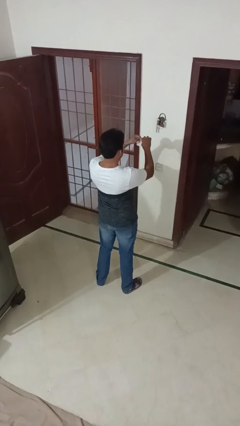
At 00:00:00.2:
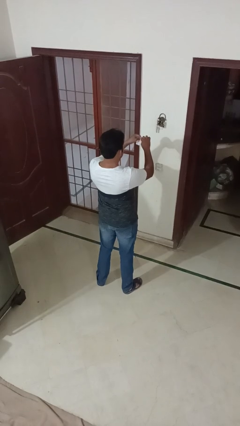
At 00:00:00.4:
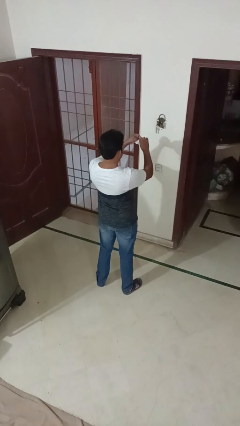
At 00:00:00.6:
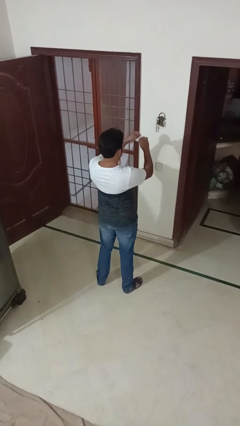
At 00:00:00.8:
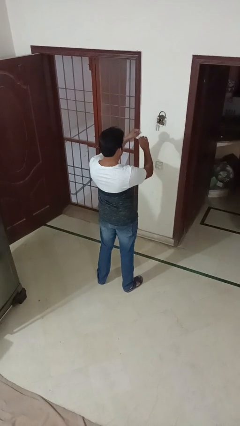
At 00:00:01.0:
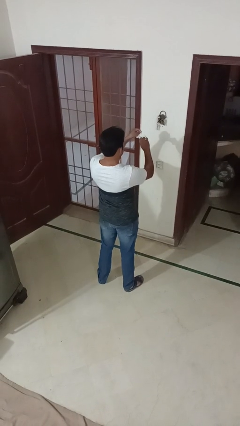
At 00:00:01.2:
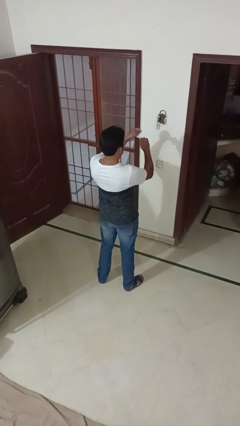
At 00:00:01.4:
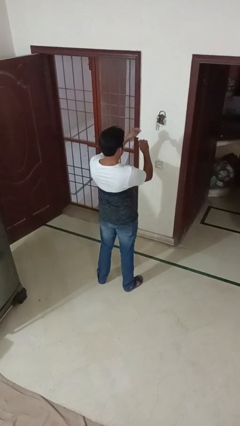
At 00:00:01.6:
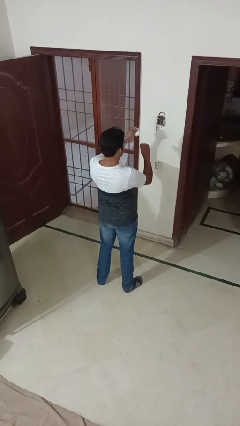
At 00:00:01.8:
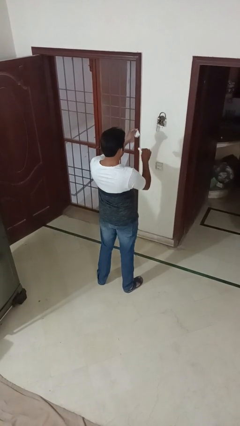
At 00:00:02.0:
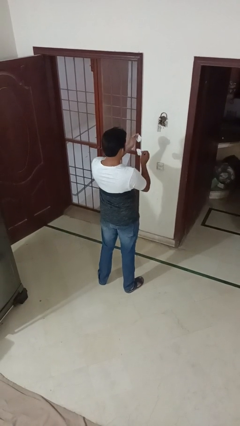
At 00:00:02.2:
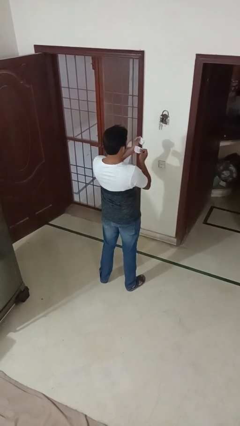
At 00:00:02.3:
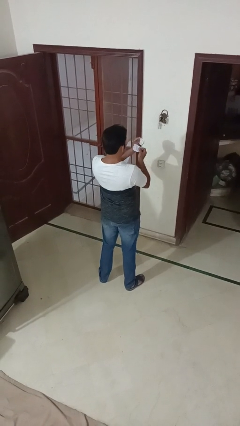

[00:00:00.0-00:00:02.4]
person tears paper

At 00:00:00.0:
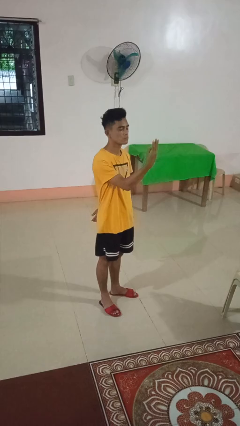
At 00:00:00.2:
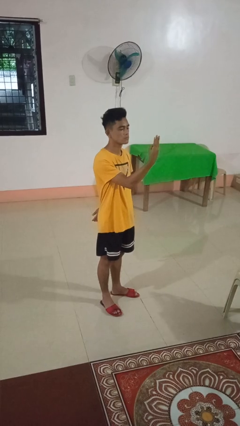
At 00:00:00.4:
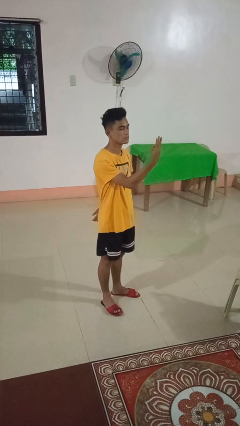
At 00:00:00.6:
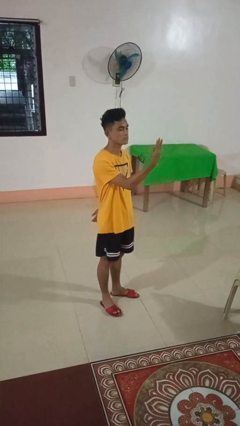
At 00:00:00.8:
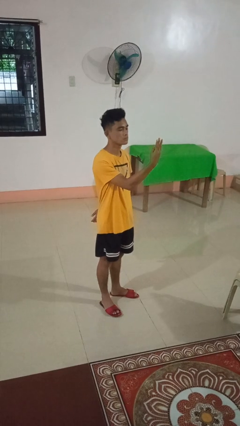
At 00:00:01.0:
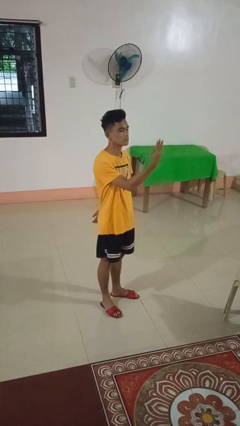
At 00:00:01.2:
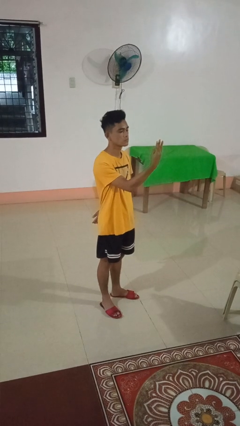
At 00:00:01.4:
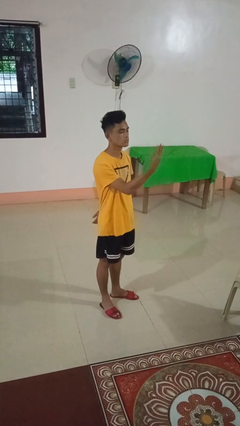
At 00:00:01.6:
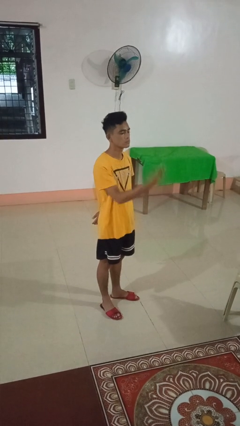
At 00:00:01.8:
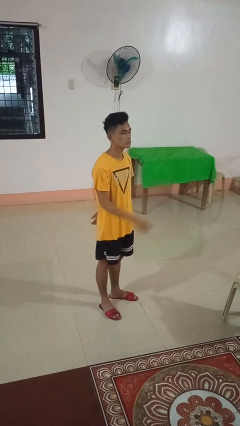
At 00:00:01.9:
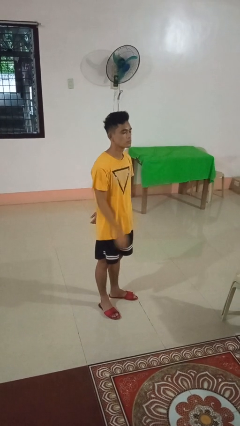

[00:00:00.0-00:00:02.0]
person gestures number three

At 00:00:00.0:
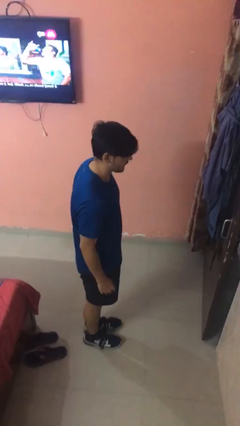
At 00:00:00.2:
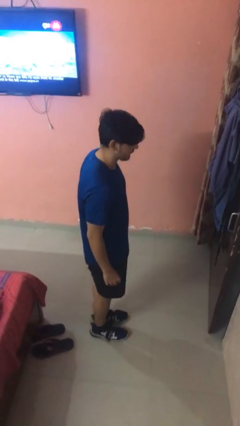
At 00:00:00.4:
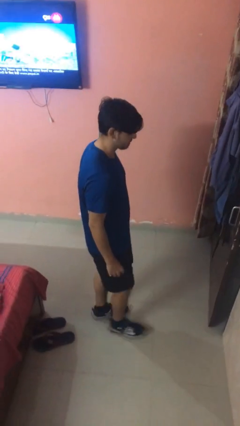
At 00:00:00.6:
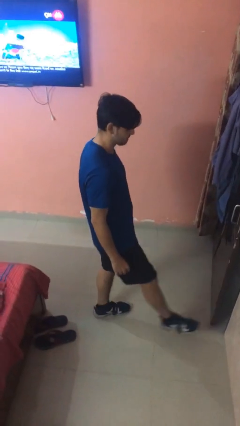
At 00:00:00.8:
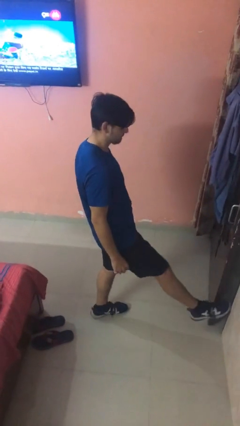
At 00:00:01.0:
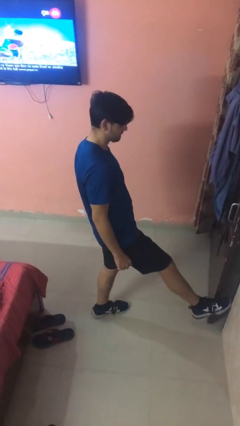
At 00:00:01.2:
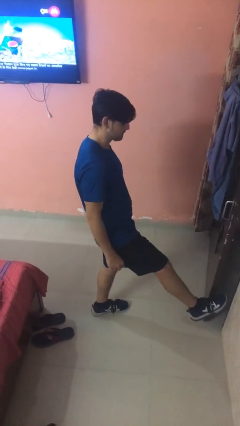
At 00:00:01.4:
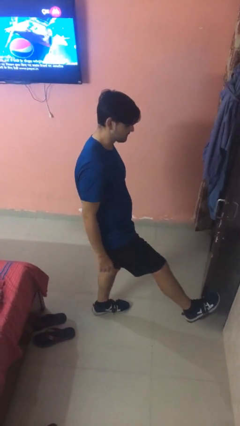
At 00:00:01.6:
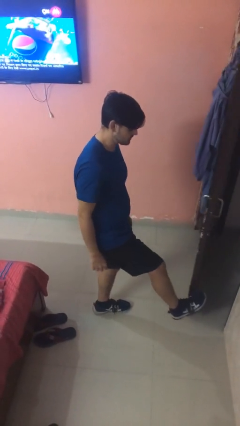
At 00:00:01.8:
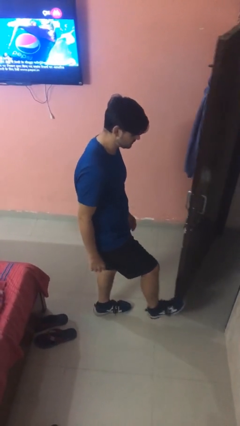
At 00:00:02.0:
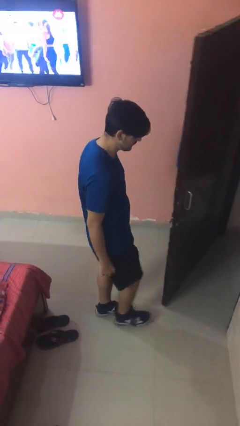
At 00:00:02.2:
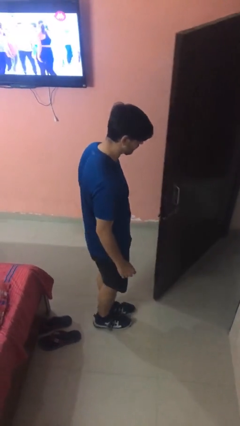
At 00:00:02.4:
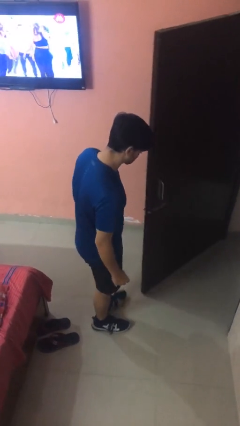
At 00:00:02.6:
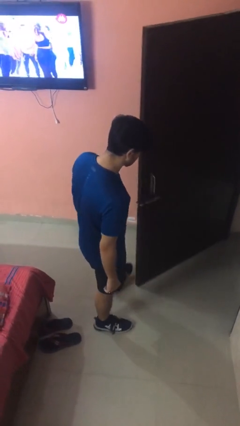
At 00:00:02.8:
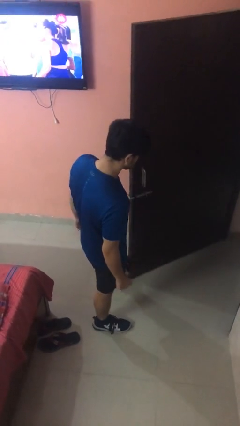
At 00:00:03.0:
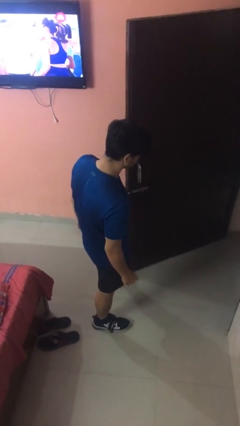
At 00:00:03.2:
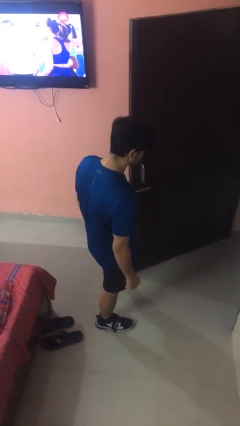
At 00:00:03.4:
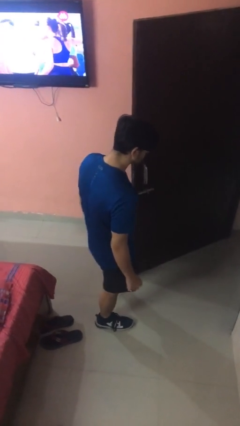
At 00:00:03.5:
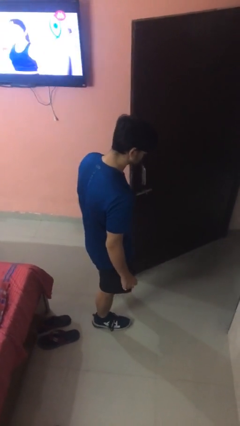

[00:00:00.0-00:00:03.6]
person opens facility door

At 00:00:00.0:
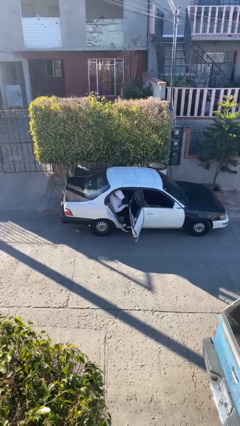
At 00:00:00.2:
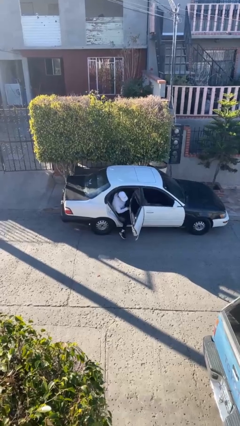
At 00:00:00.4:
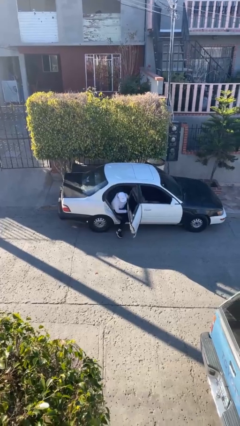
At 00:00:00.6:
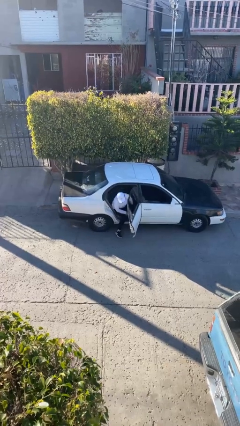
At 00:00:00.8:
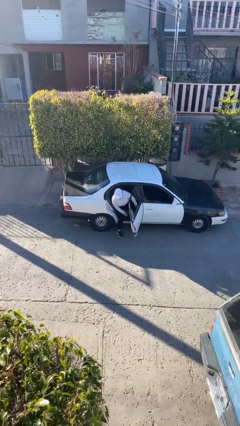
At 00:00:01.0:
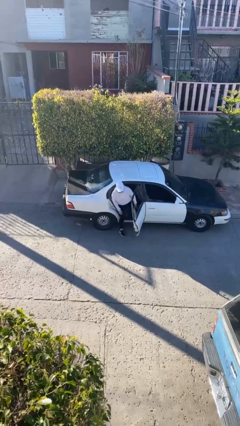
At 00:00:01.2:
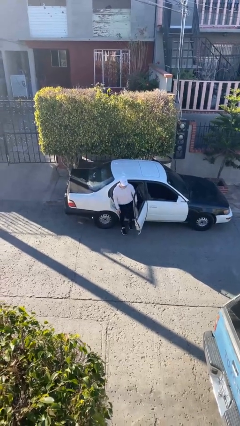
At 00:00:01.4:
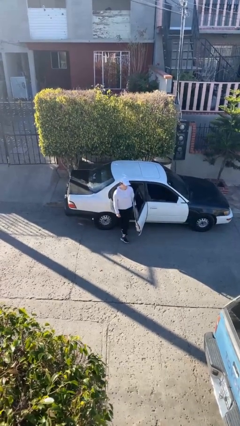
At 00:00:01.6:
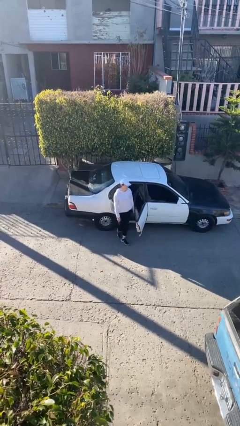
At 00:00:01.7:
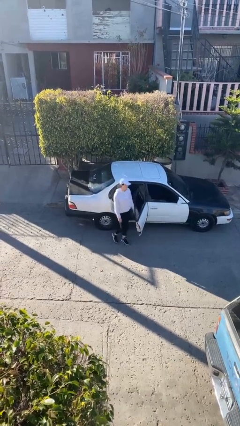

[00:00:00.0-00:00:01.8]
person exits car

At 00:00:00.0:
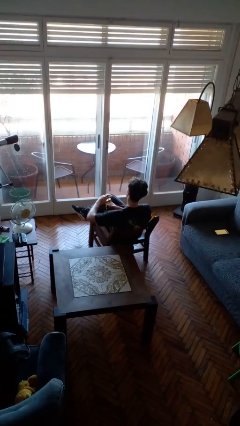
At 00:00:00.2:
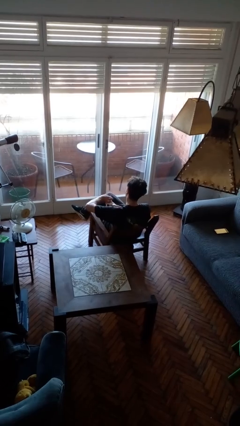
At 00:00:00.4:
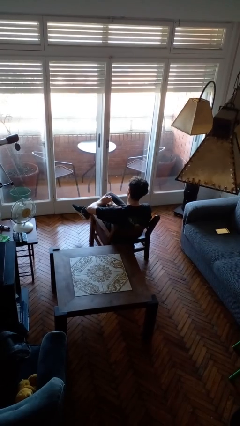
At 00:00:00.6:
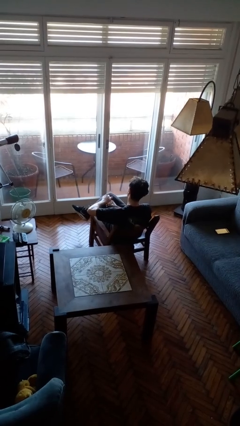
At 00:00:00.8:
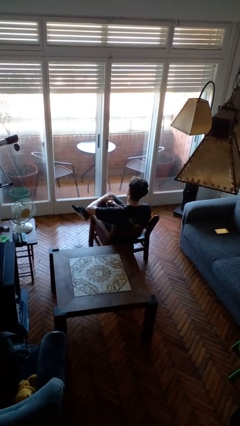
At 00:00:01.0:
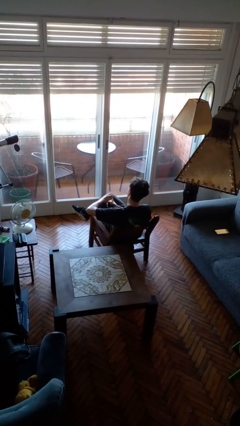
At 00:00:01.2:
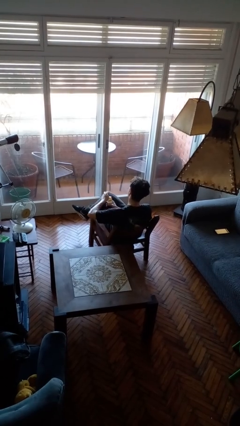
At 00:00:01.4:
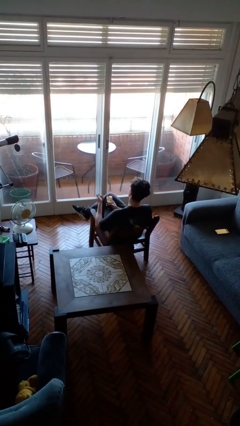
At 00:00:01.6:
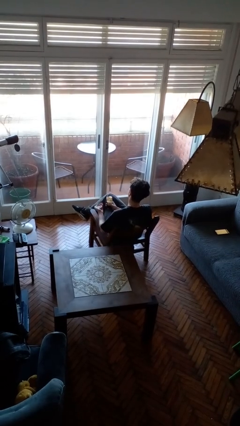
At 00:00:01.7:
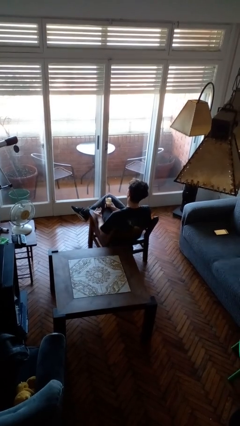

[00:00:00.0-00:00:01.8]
person opens jar

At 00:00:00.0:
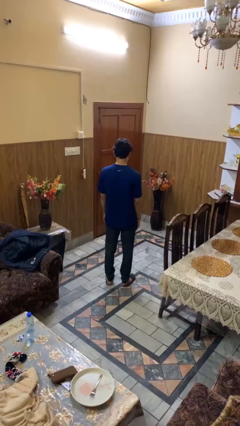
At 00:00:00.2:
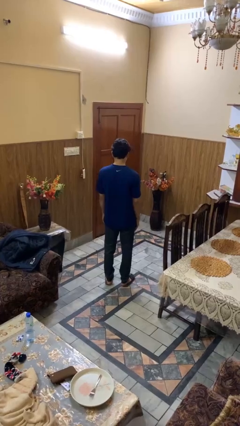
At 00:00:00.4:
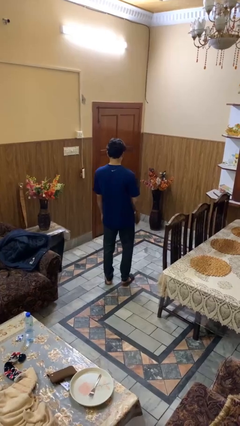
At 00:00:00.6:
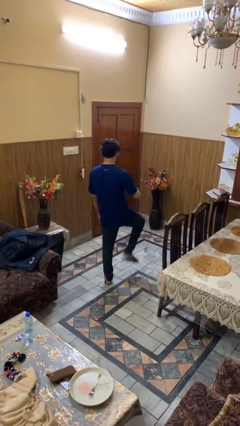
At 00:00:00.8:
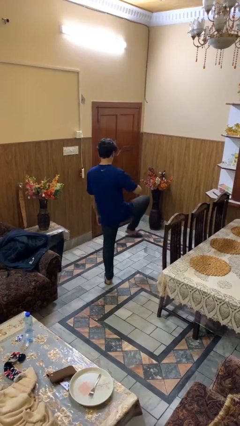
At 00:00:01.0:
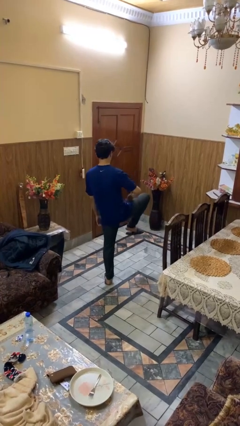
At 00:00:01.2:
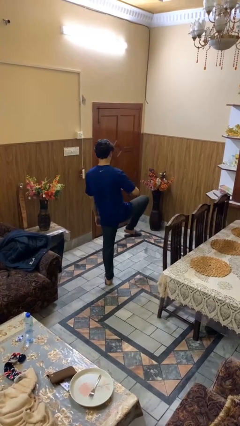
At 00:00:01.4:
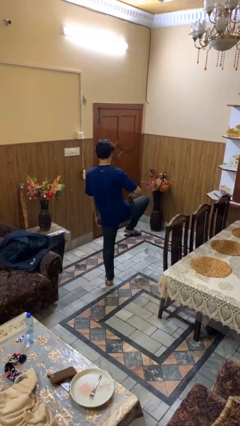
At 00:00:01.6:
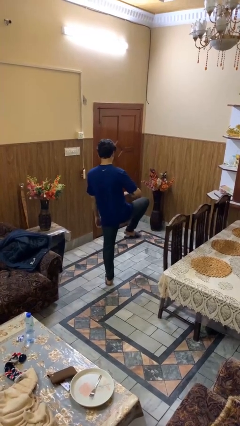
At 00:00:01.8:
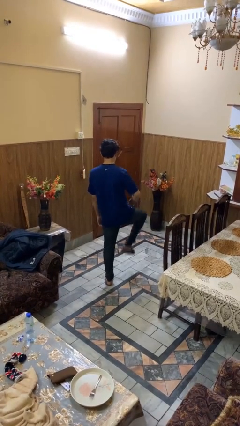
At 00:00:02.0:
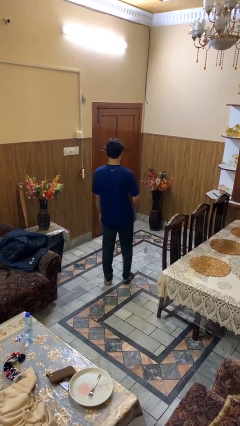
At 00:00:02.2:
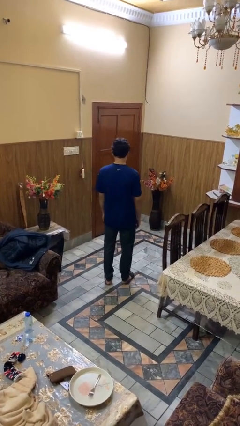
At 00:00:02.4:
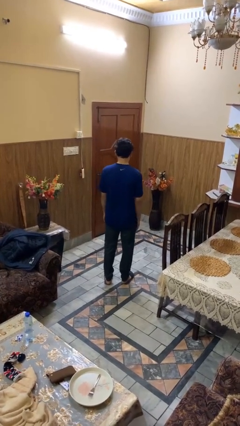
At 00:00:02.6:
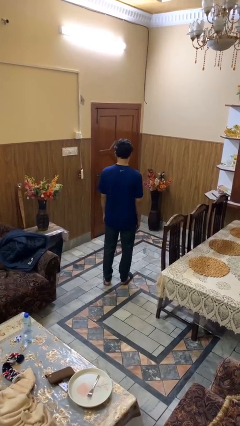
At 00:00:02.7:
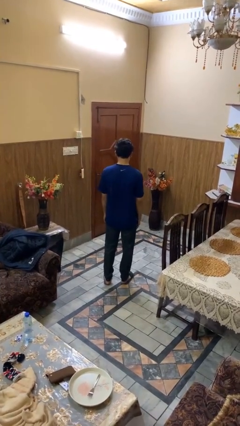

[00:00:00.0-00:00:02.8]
person slaps hands on thighs

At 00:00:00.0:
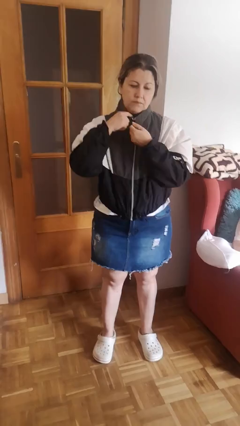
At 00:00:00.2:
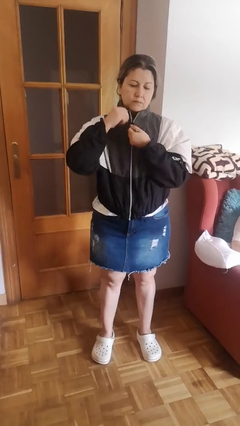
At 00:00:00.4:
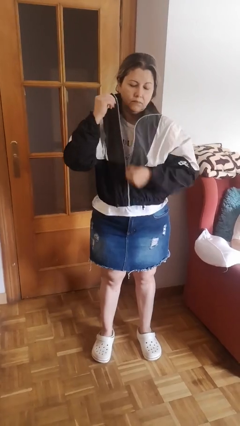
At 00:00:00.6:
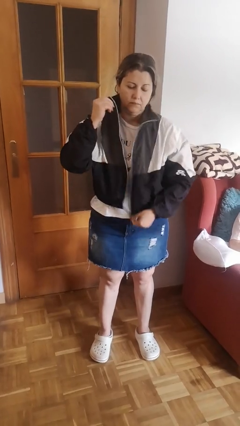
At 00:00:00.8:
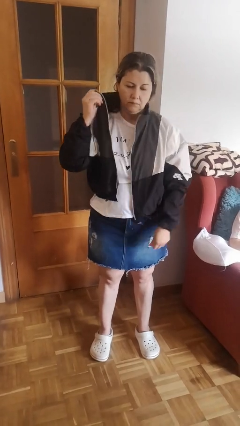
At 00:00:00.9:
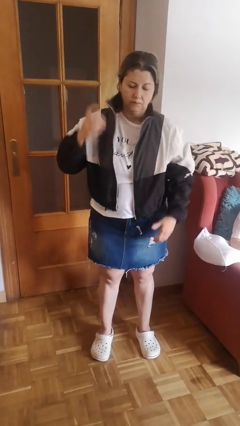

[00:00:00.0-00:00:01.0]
person unzips jacket

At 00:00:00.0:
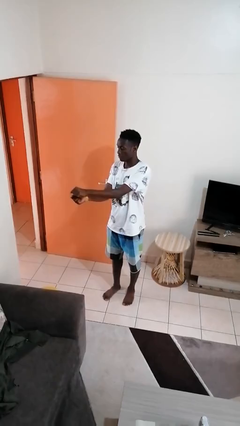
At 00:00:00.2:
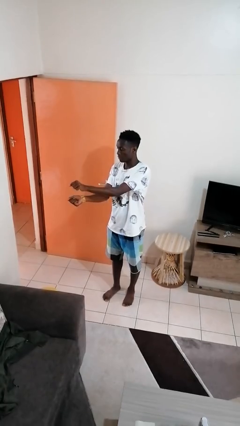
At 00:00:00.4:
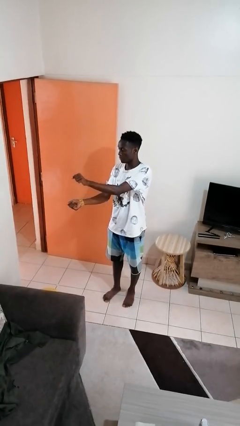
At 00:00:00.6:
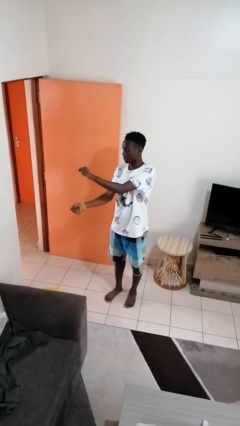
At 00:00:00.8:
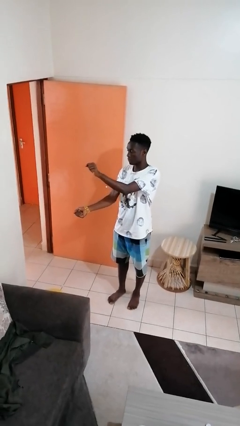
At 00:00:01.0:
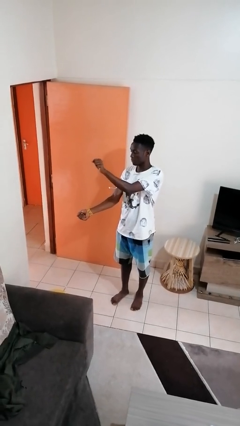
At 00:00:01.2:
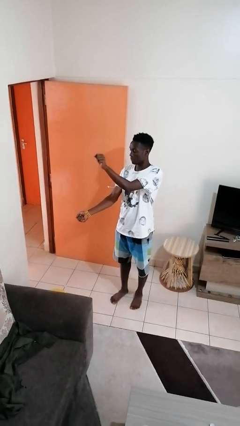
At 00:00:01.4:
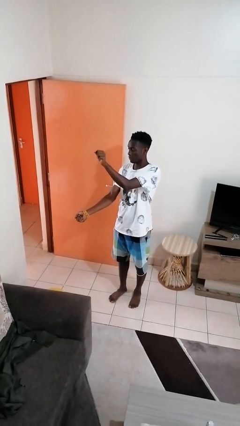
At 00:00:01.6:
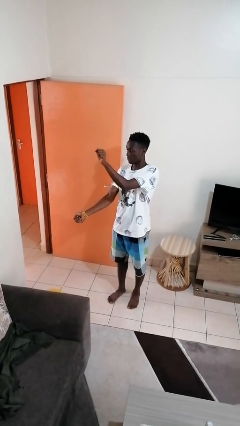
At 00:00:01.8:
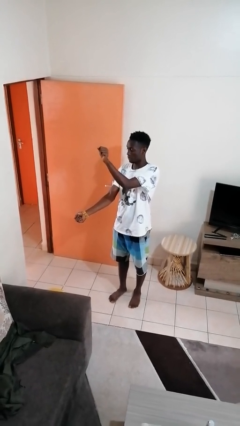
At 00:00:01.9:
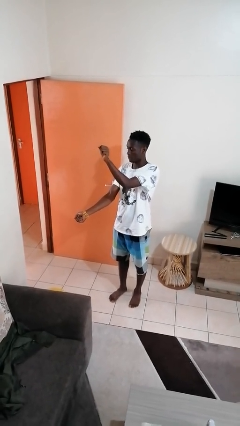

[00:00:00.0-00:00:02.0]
person gestures zoom in
